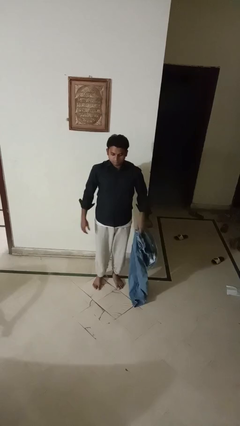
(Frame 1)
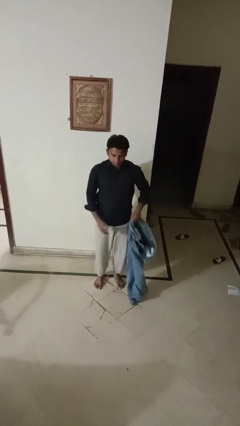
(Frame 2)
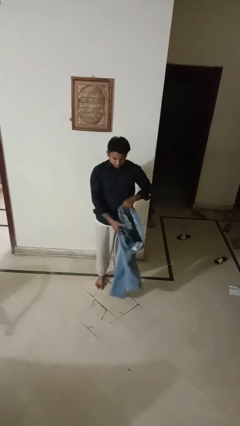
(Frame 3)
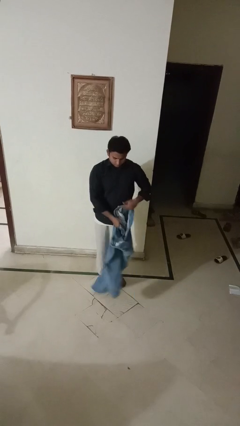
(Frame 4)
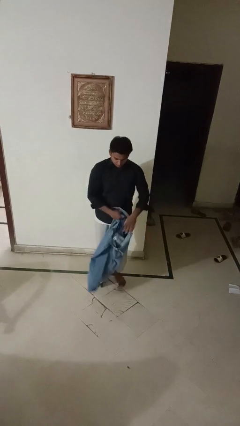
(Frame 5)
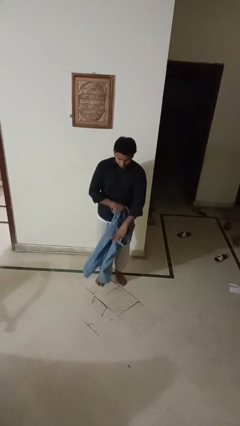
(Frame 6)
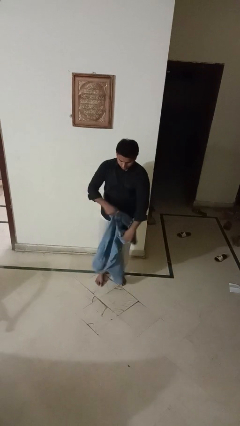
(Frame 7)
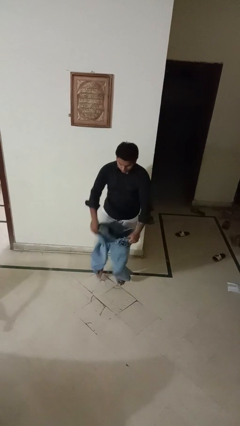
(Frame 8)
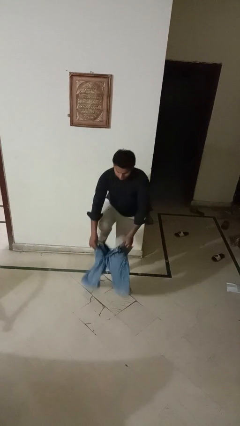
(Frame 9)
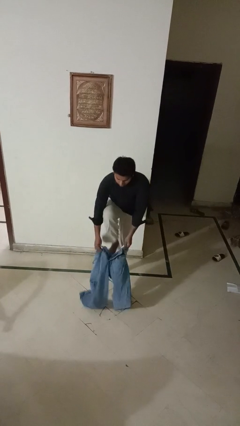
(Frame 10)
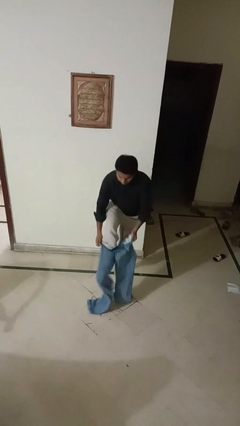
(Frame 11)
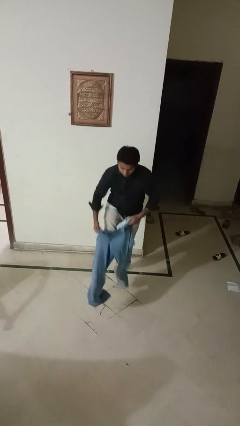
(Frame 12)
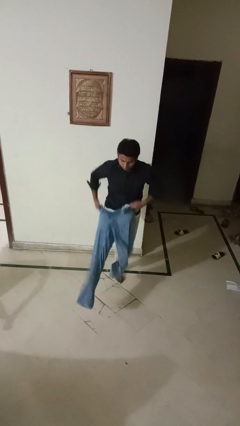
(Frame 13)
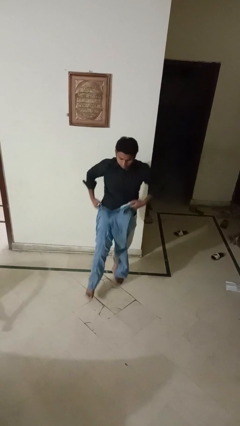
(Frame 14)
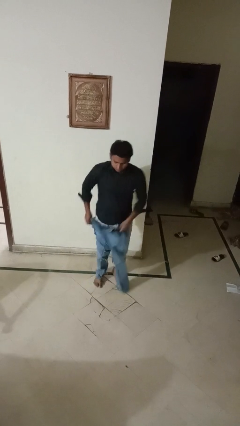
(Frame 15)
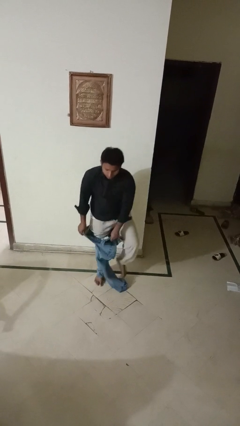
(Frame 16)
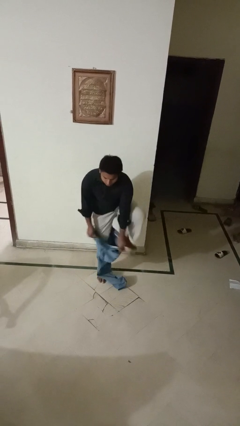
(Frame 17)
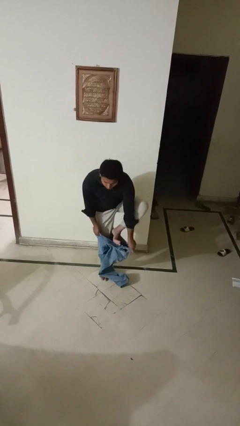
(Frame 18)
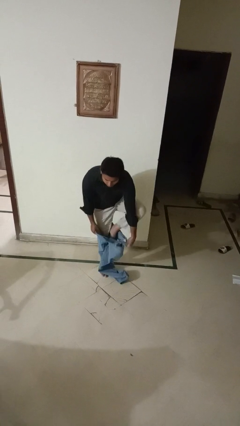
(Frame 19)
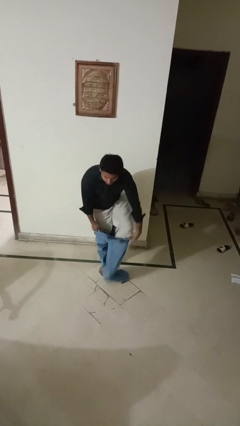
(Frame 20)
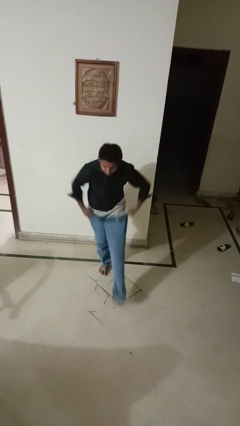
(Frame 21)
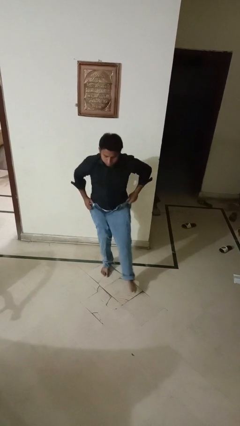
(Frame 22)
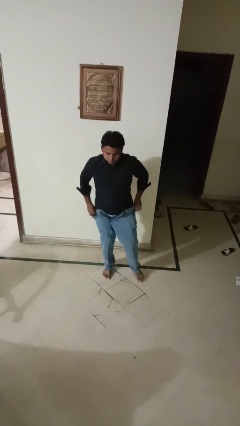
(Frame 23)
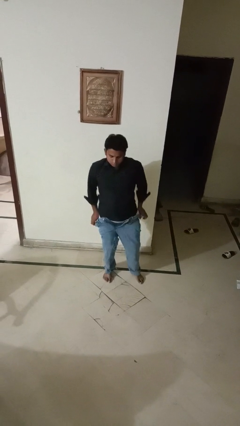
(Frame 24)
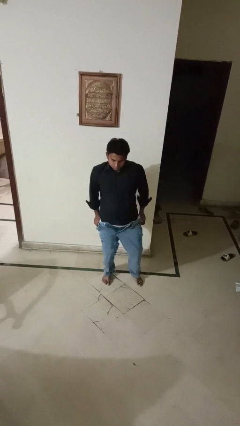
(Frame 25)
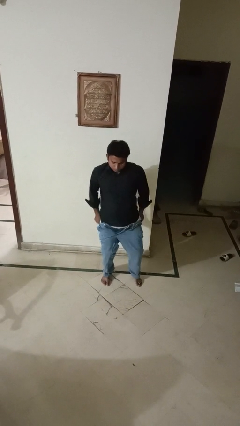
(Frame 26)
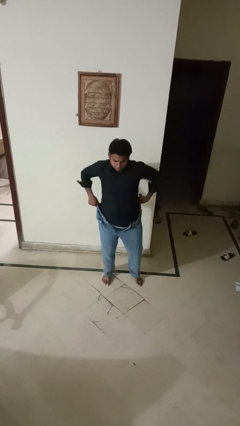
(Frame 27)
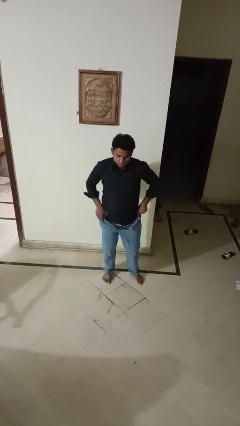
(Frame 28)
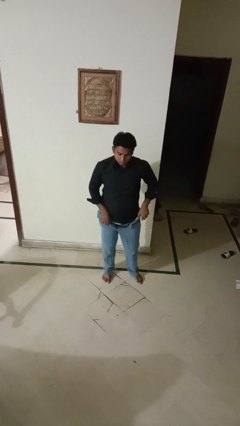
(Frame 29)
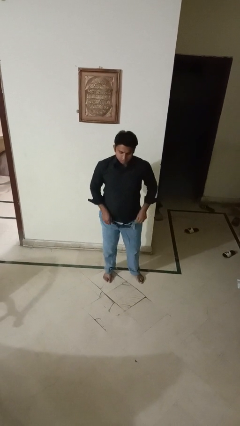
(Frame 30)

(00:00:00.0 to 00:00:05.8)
person puts on pants

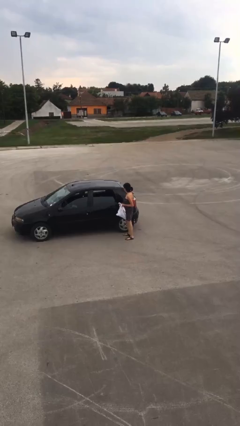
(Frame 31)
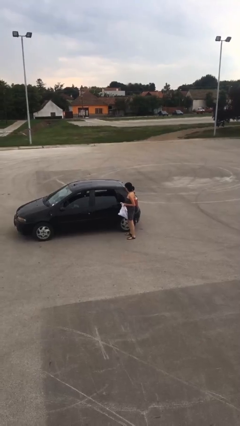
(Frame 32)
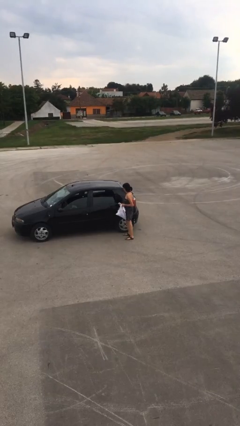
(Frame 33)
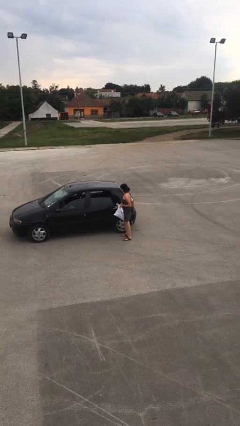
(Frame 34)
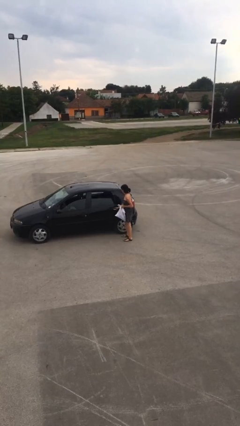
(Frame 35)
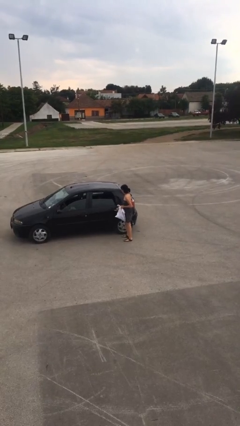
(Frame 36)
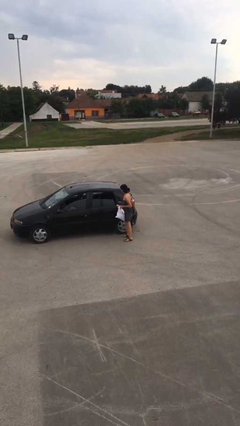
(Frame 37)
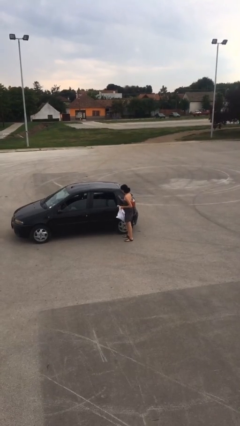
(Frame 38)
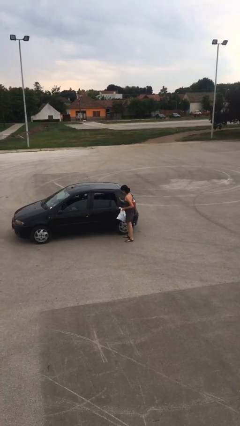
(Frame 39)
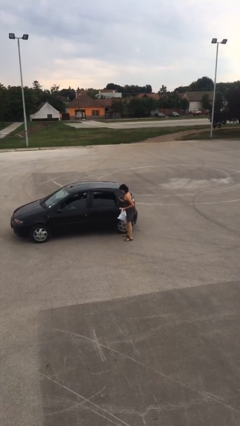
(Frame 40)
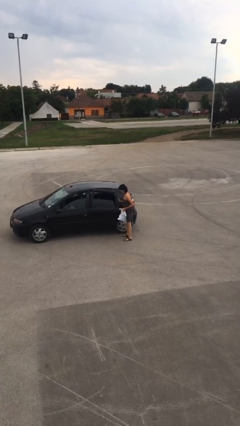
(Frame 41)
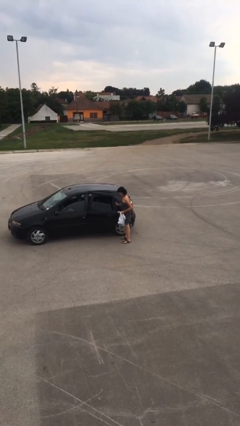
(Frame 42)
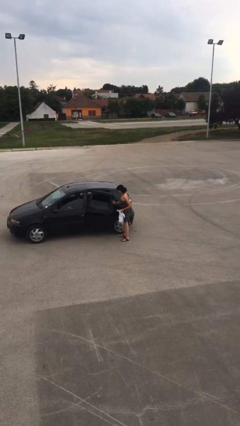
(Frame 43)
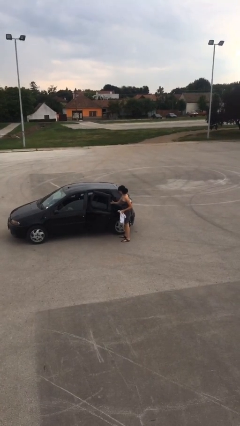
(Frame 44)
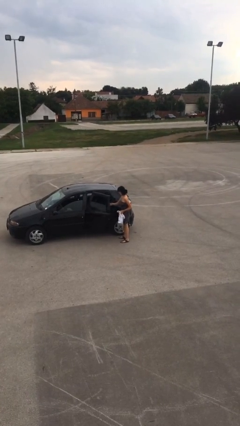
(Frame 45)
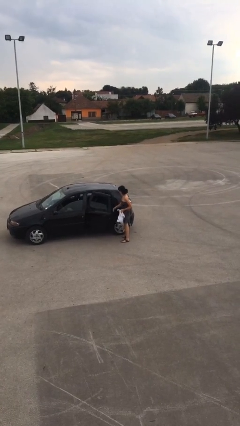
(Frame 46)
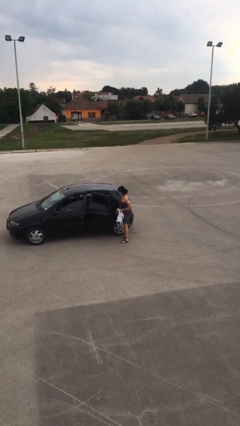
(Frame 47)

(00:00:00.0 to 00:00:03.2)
person opens car door

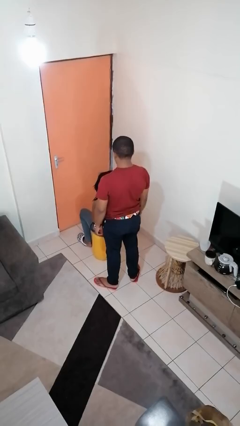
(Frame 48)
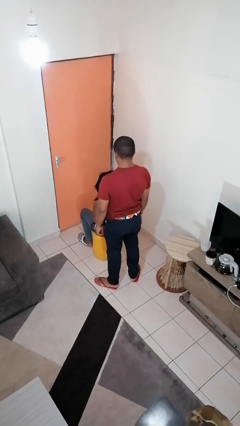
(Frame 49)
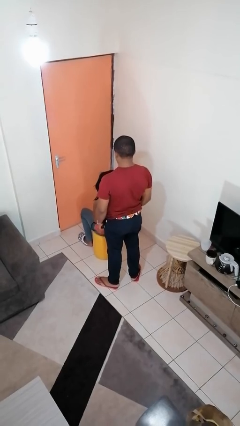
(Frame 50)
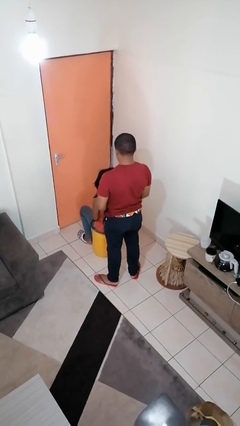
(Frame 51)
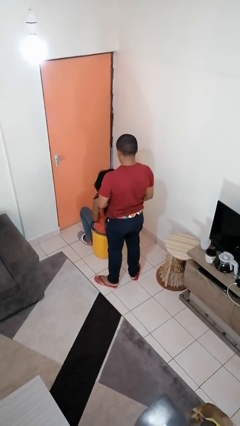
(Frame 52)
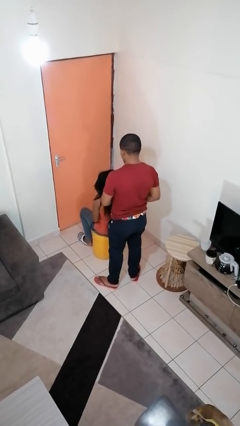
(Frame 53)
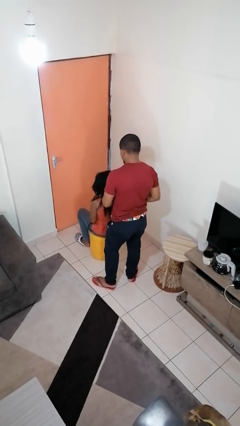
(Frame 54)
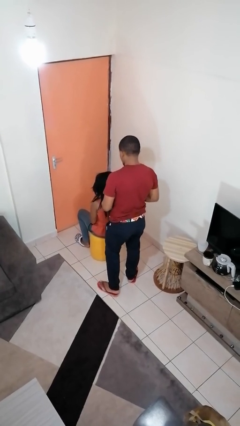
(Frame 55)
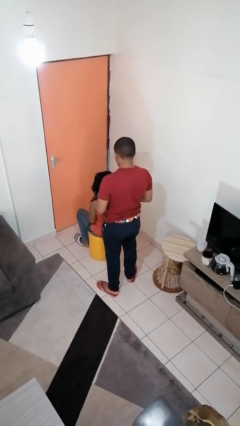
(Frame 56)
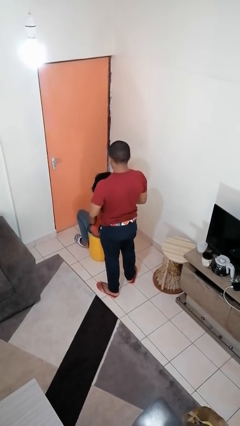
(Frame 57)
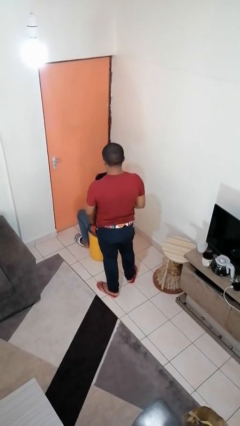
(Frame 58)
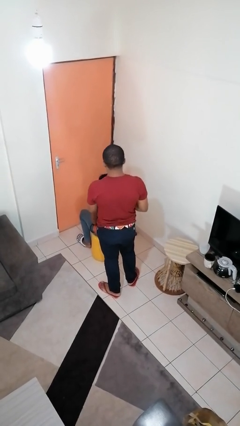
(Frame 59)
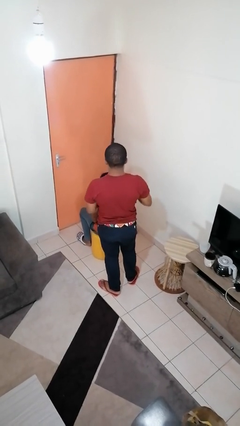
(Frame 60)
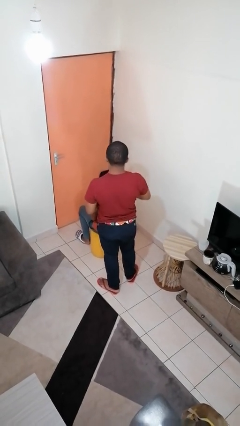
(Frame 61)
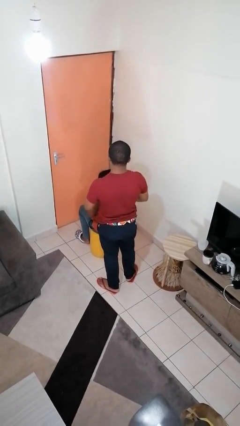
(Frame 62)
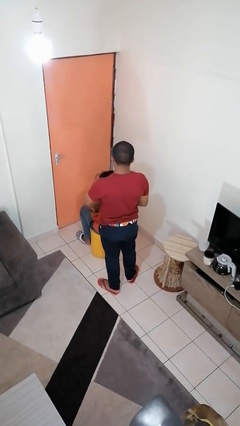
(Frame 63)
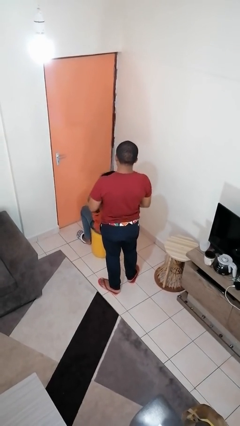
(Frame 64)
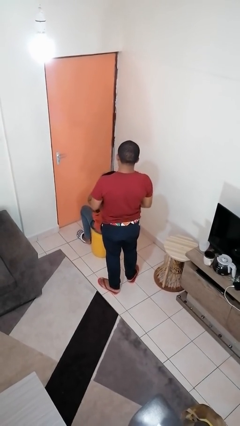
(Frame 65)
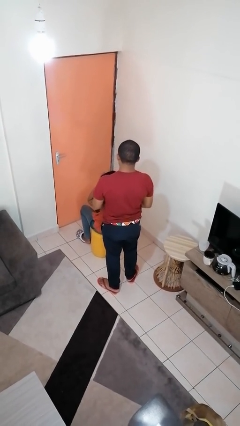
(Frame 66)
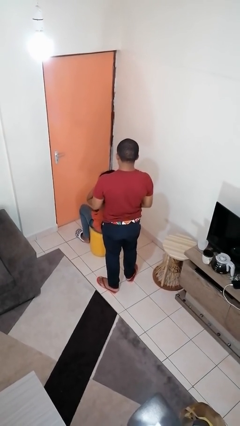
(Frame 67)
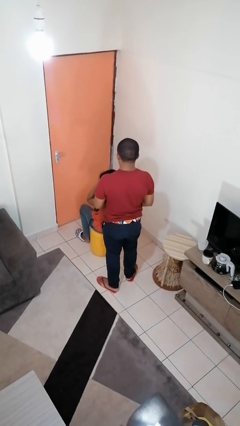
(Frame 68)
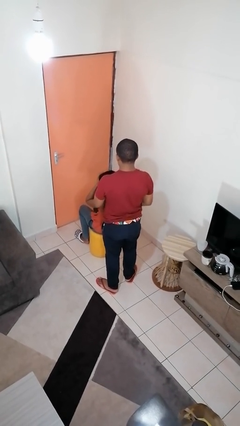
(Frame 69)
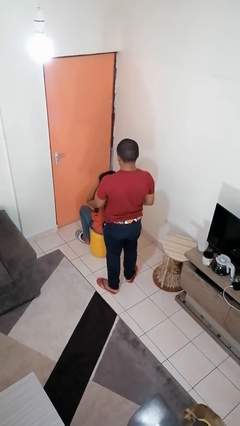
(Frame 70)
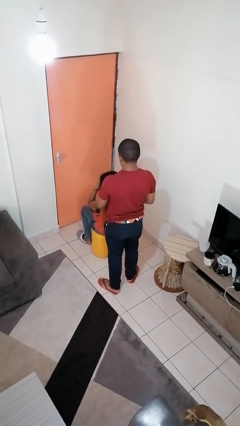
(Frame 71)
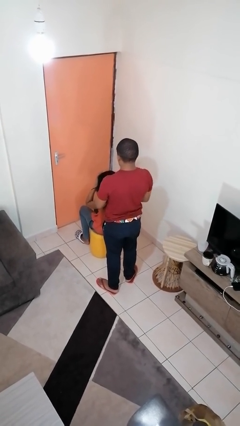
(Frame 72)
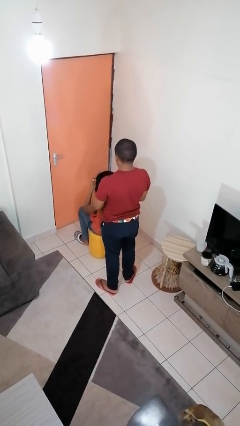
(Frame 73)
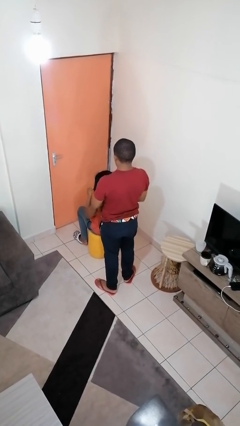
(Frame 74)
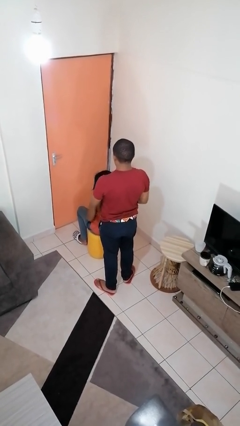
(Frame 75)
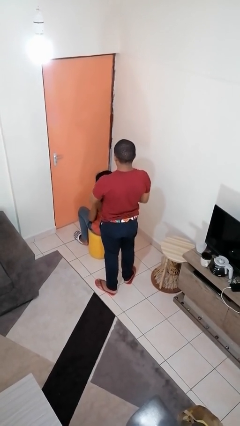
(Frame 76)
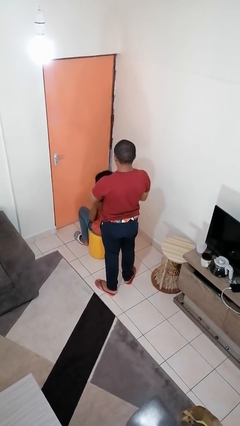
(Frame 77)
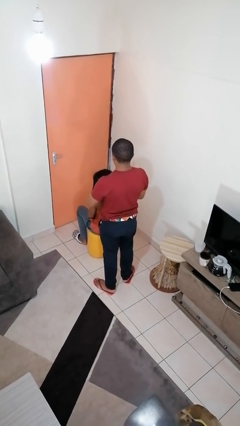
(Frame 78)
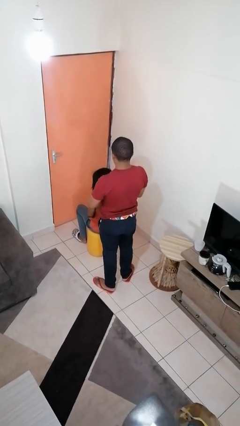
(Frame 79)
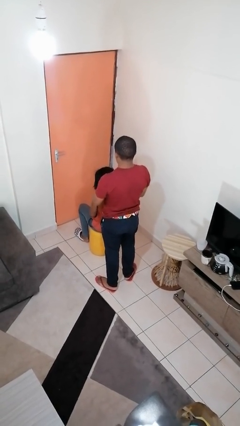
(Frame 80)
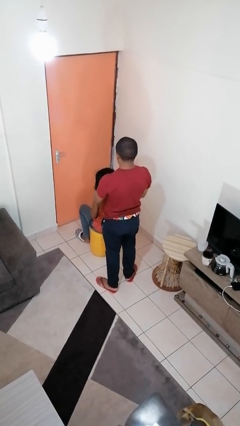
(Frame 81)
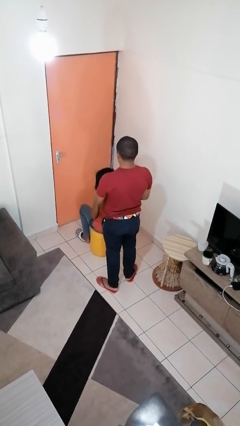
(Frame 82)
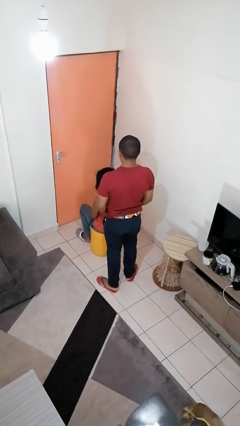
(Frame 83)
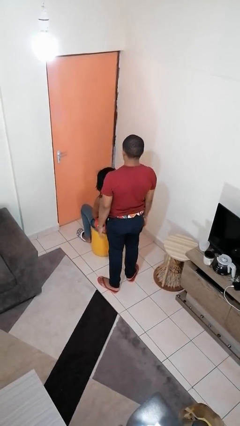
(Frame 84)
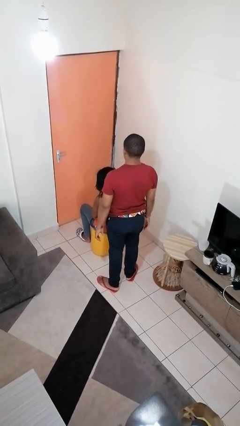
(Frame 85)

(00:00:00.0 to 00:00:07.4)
person braids hair of person

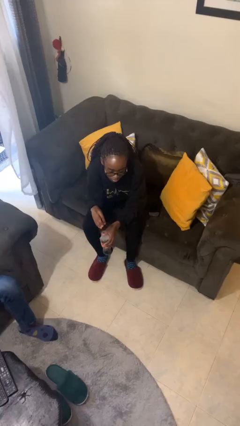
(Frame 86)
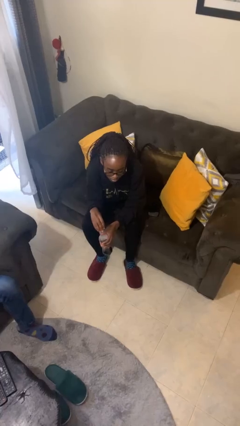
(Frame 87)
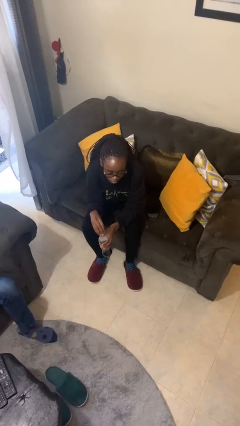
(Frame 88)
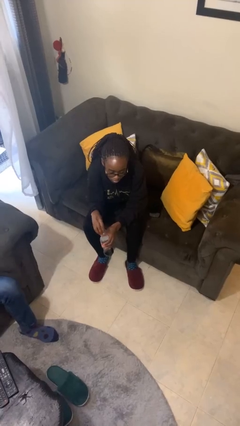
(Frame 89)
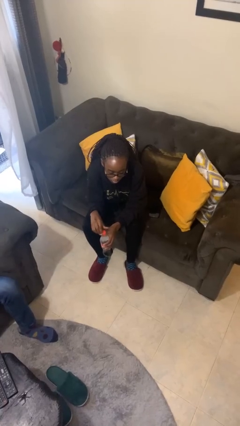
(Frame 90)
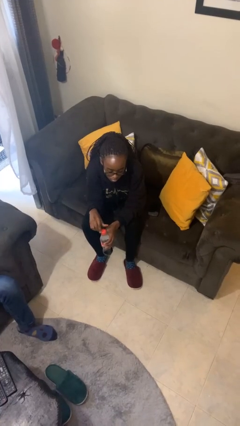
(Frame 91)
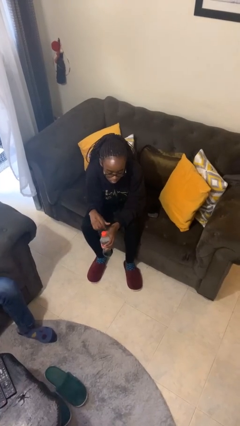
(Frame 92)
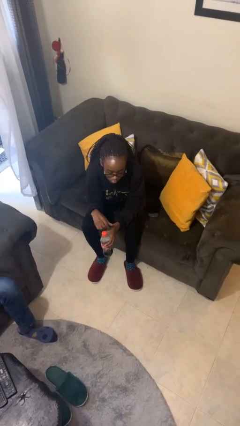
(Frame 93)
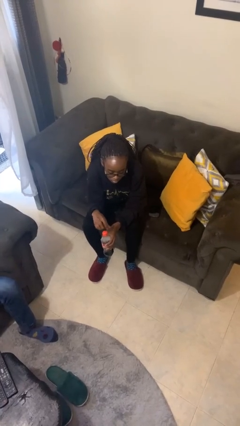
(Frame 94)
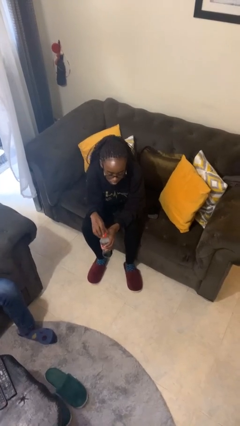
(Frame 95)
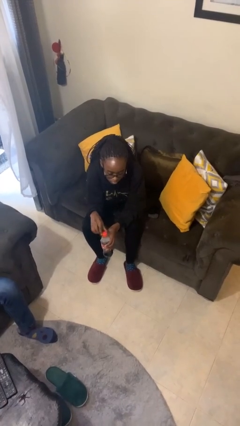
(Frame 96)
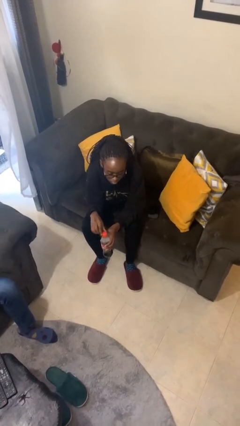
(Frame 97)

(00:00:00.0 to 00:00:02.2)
person screws lid to bottle
